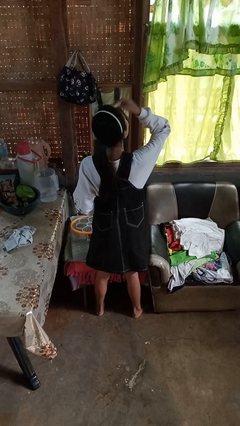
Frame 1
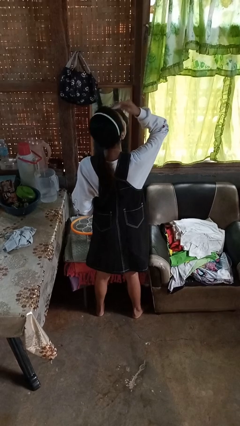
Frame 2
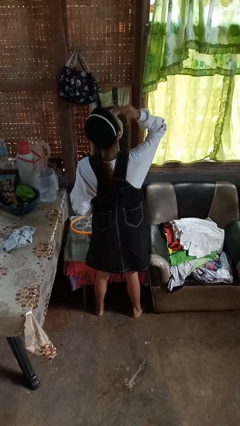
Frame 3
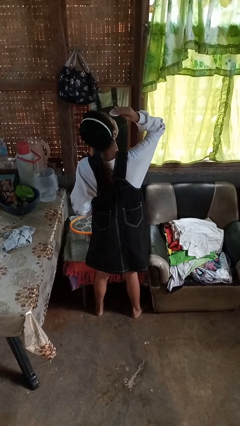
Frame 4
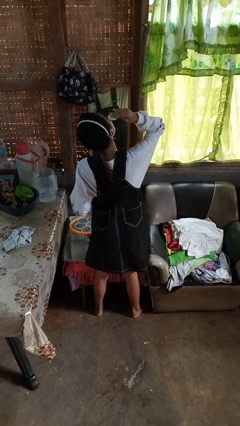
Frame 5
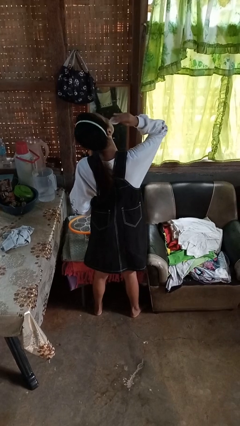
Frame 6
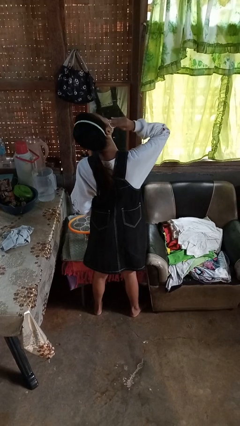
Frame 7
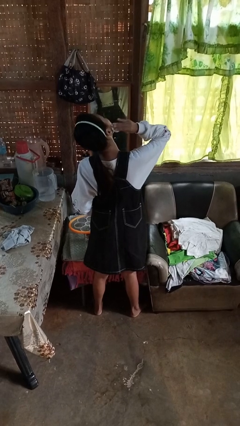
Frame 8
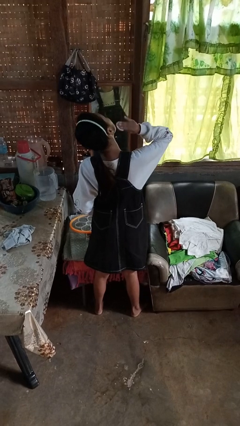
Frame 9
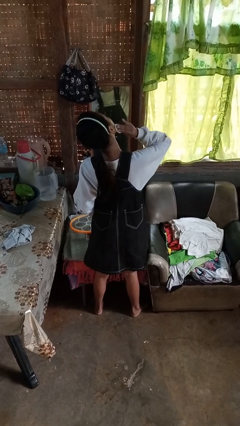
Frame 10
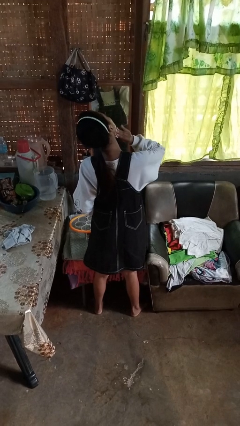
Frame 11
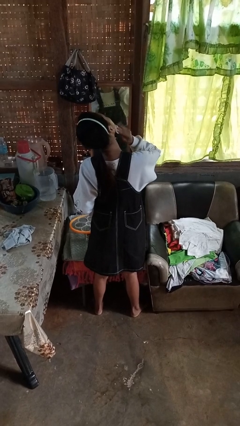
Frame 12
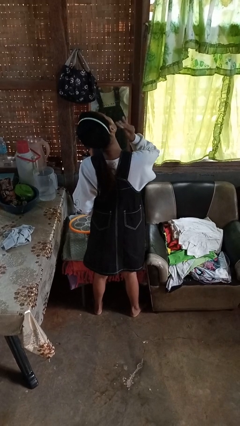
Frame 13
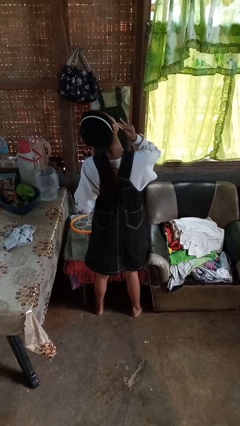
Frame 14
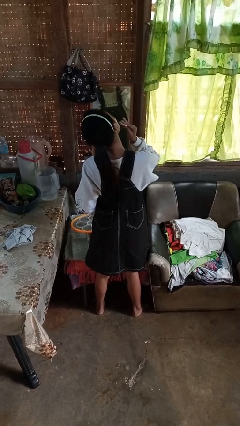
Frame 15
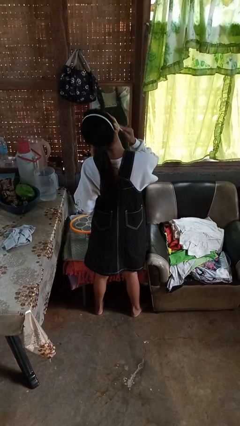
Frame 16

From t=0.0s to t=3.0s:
person applies foundation makeup

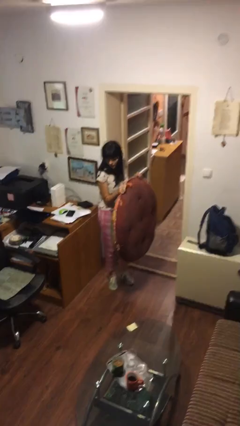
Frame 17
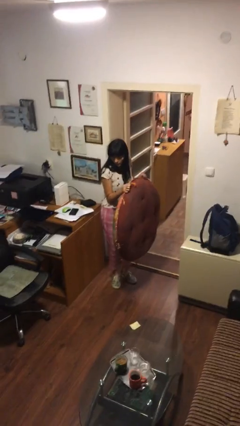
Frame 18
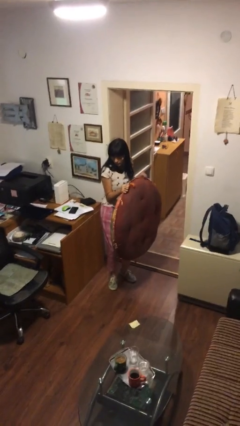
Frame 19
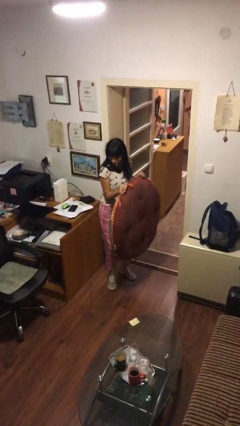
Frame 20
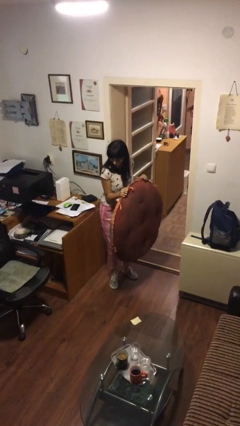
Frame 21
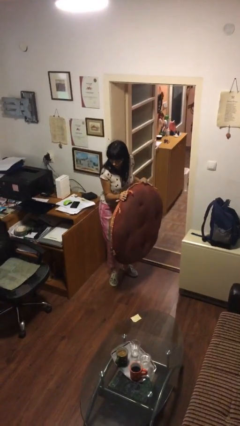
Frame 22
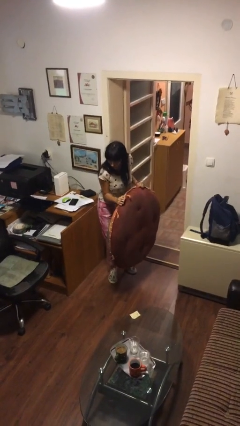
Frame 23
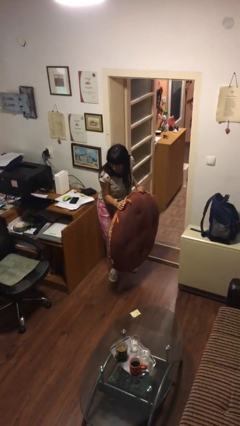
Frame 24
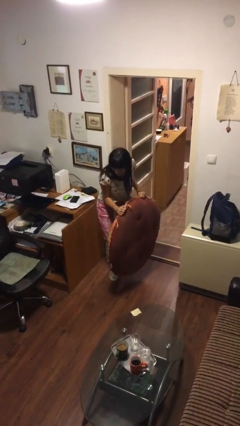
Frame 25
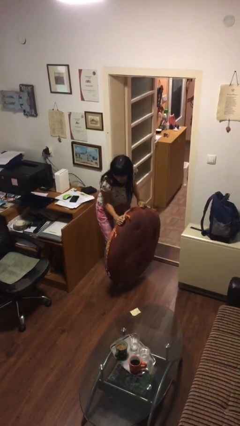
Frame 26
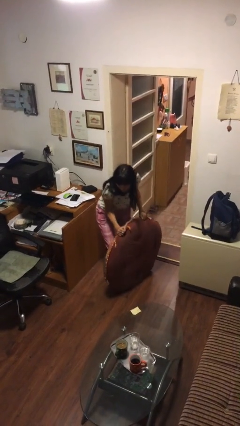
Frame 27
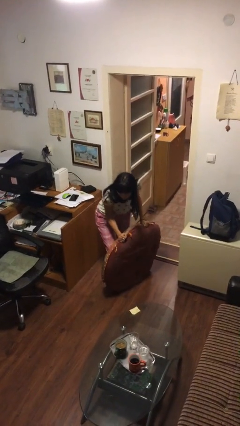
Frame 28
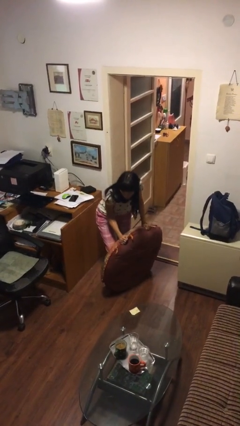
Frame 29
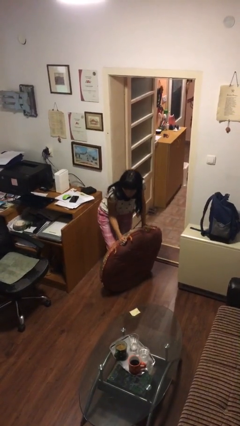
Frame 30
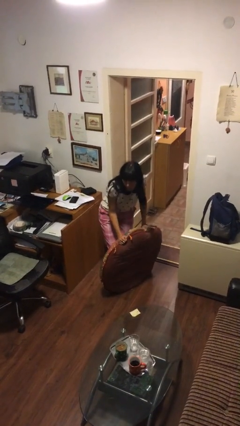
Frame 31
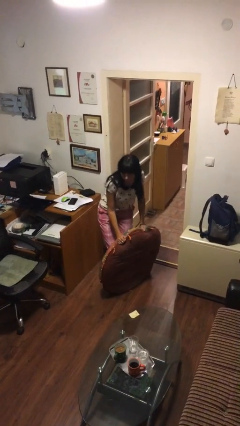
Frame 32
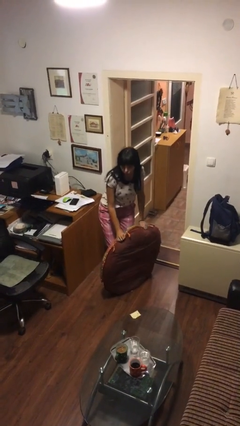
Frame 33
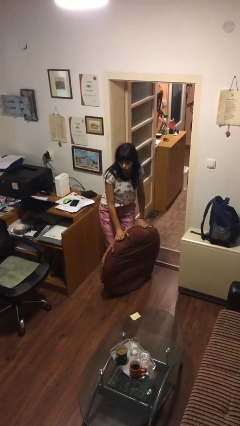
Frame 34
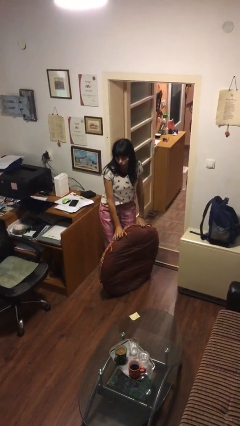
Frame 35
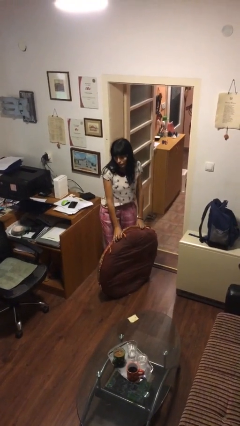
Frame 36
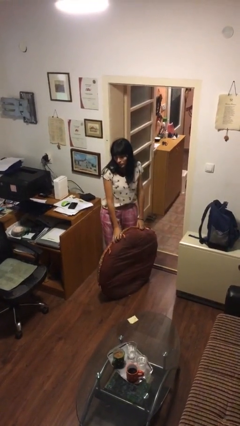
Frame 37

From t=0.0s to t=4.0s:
person puts down object on floor

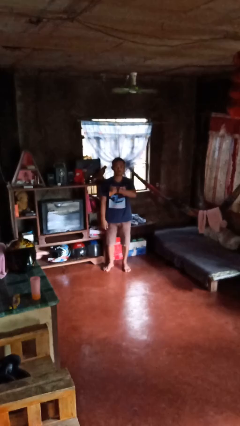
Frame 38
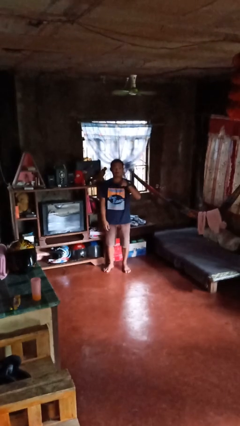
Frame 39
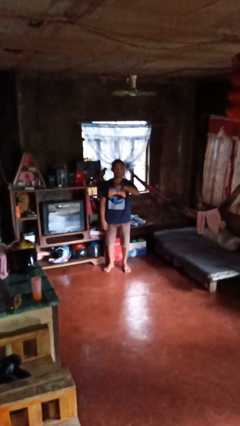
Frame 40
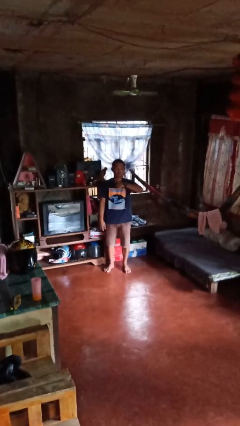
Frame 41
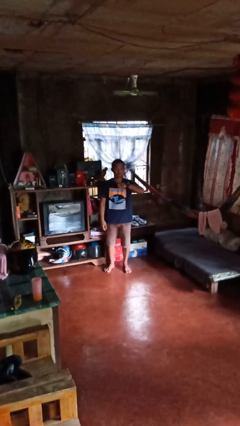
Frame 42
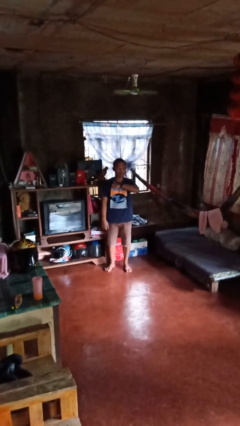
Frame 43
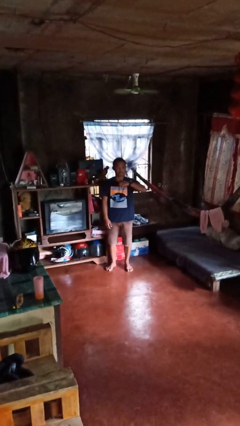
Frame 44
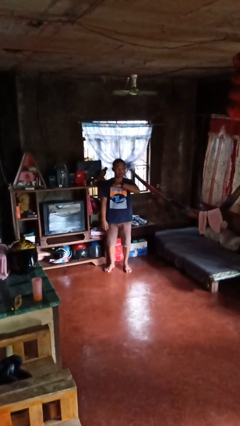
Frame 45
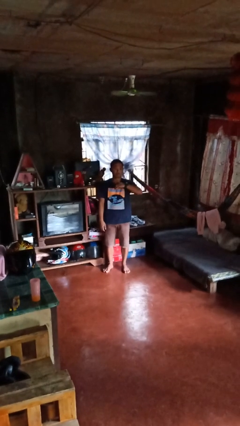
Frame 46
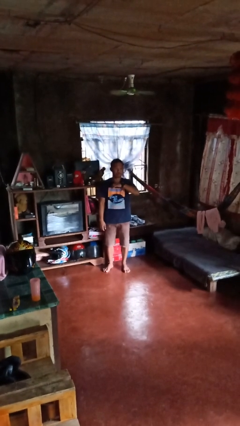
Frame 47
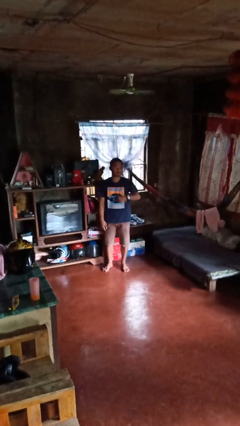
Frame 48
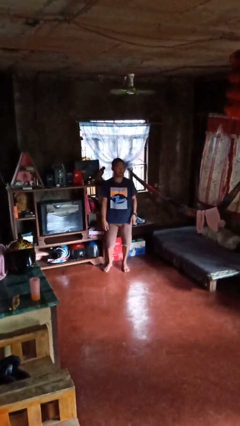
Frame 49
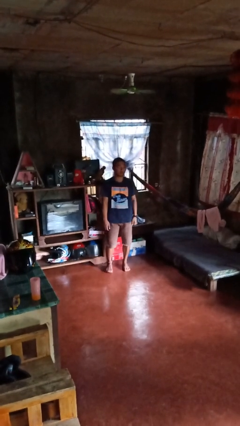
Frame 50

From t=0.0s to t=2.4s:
person gestures cut

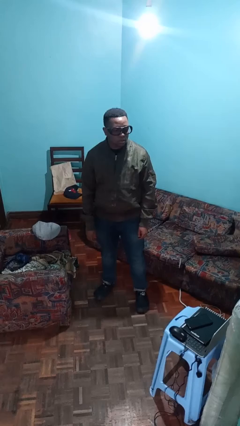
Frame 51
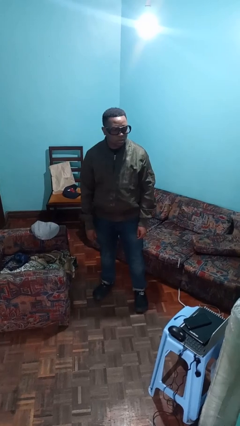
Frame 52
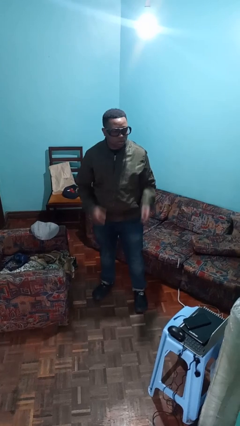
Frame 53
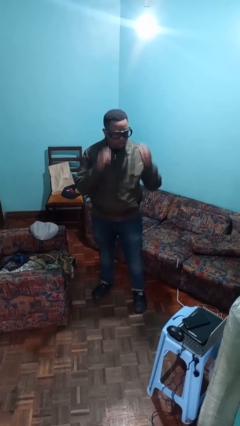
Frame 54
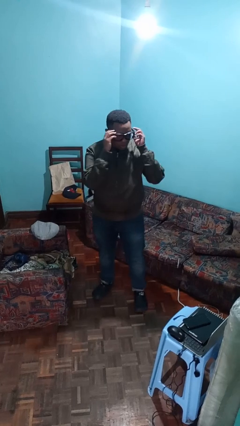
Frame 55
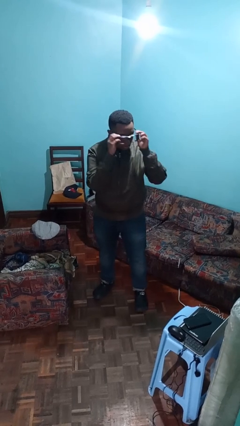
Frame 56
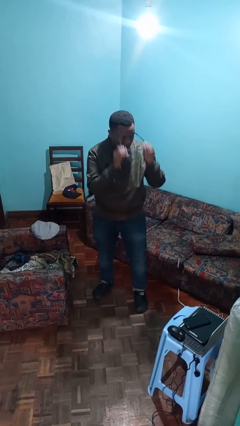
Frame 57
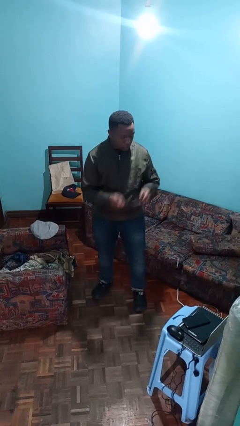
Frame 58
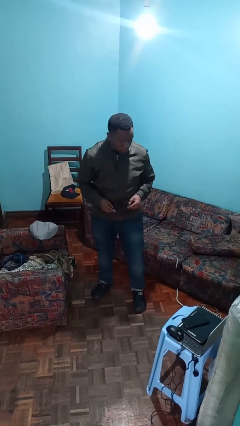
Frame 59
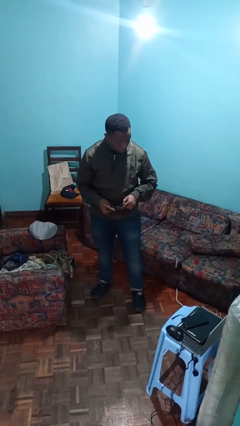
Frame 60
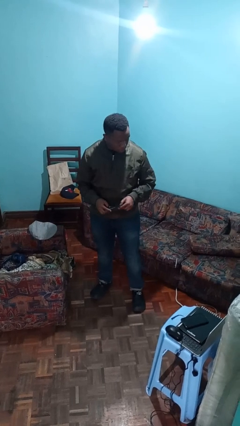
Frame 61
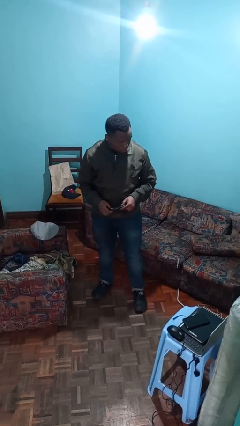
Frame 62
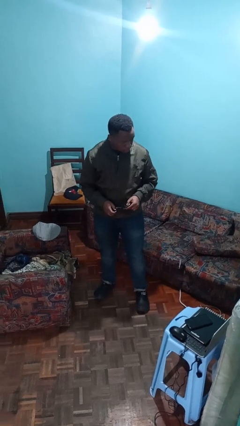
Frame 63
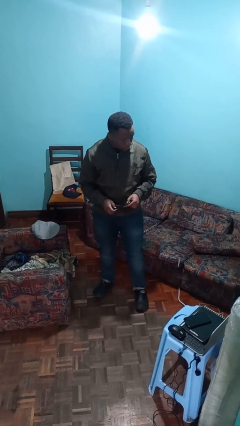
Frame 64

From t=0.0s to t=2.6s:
person takes off glasses

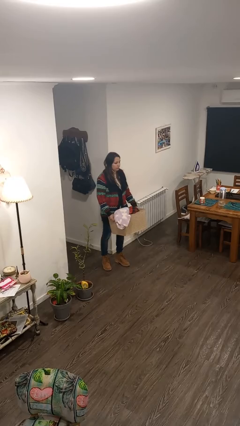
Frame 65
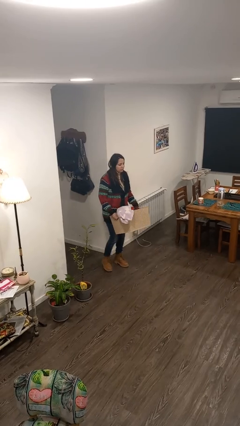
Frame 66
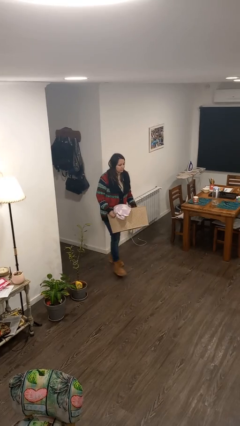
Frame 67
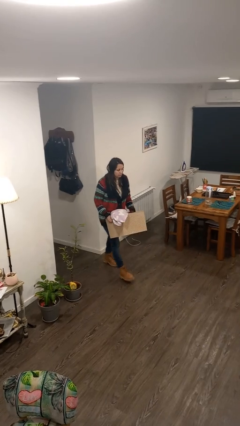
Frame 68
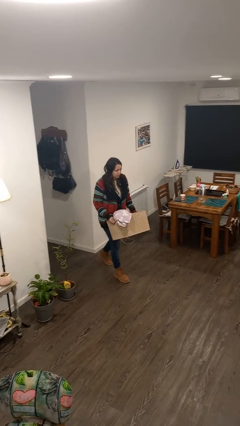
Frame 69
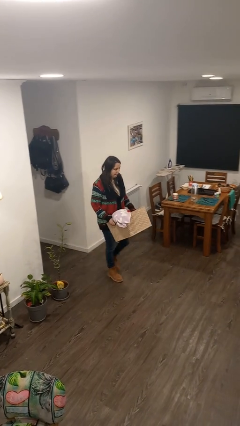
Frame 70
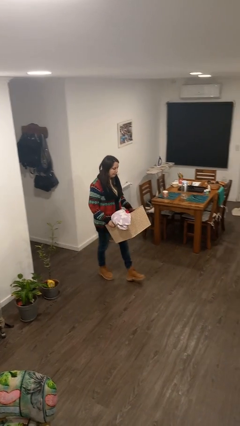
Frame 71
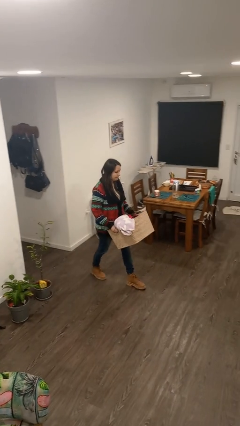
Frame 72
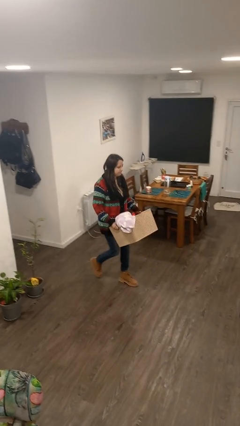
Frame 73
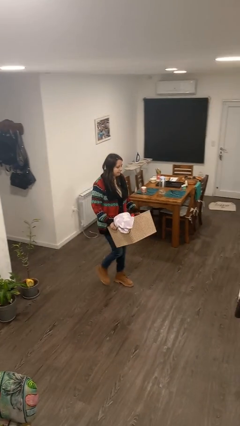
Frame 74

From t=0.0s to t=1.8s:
person carries laundry basket

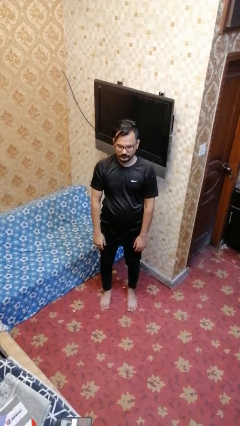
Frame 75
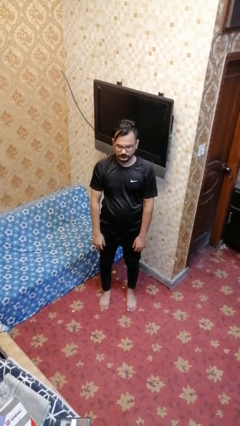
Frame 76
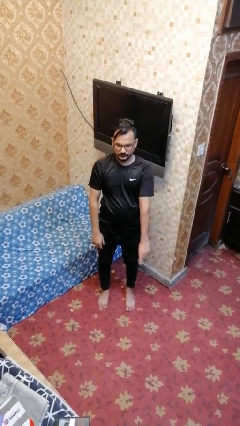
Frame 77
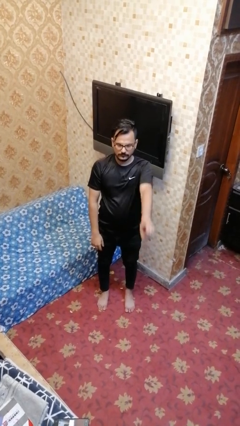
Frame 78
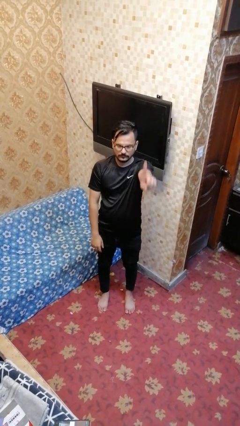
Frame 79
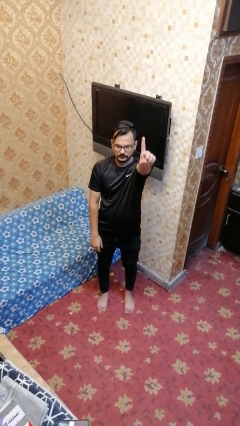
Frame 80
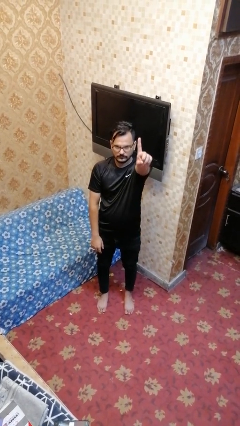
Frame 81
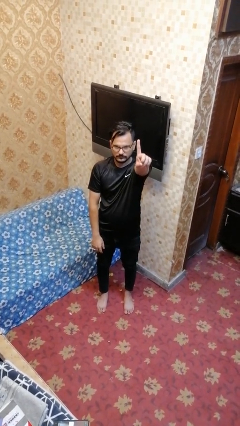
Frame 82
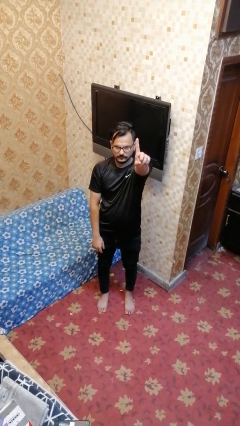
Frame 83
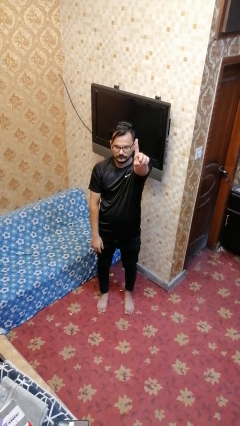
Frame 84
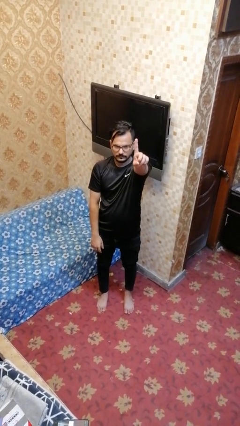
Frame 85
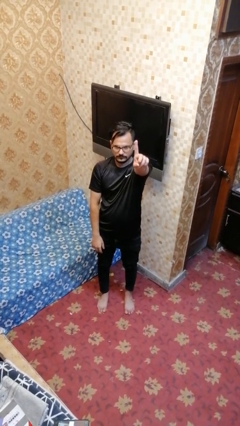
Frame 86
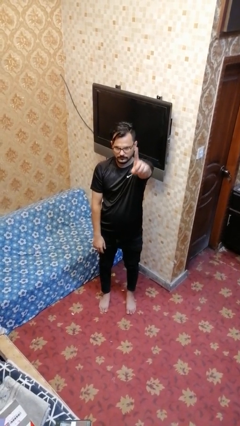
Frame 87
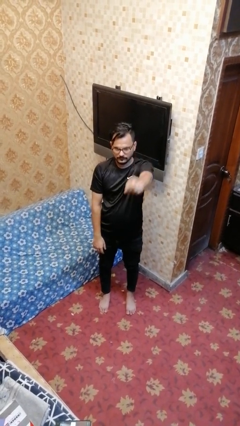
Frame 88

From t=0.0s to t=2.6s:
person gestures number one

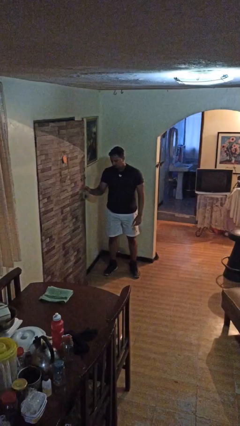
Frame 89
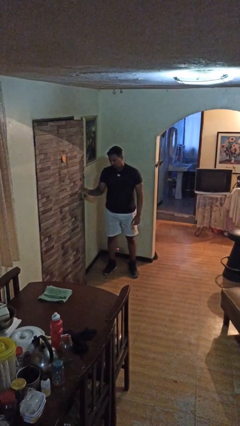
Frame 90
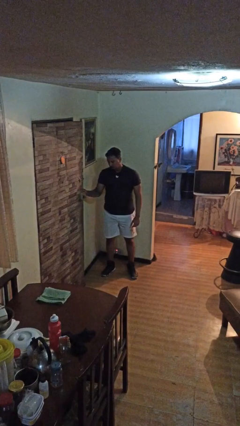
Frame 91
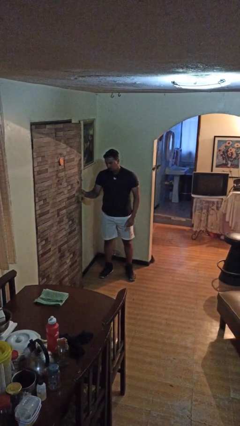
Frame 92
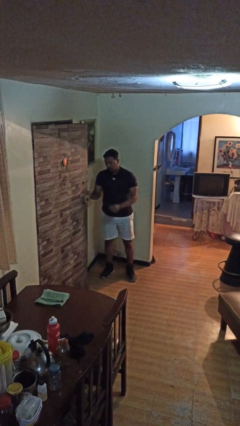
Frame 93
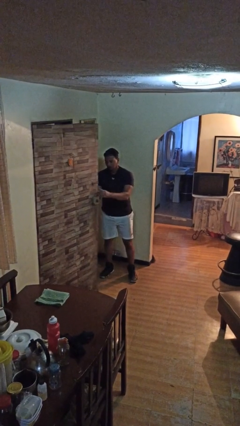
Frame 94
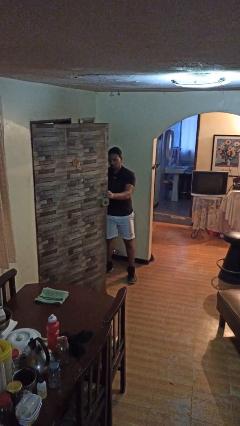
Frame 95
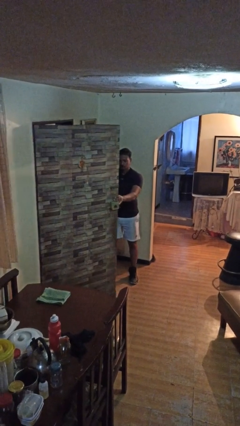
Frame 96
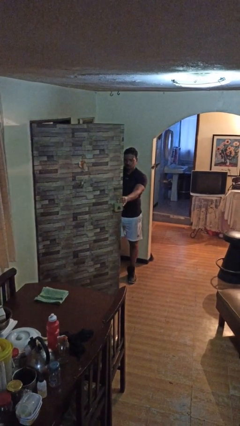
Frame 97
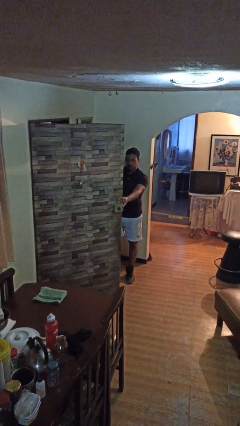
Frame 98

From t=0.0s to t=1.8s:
person opens facility door
